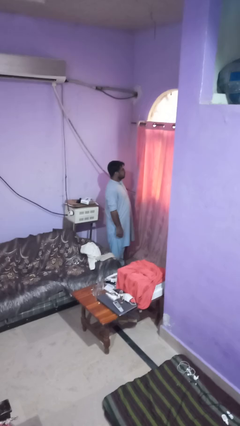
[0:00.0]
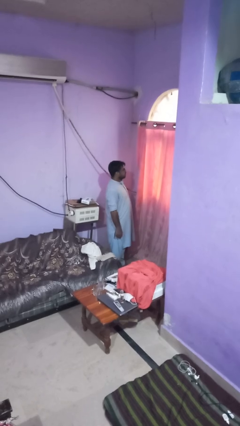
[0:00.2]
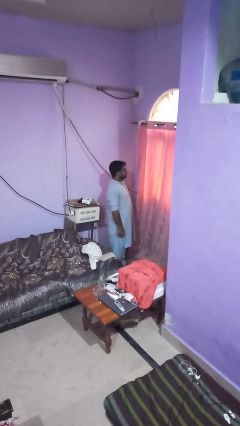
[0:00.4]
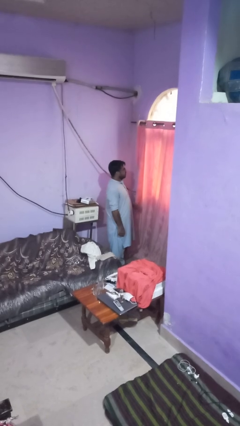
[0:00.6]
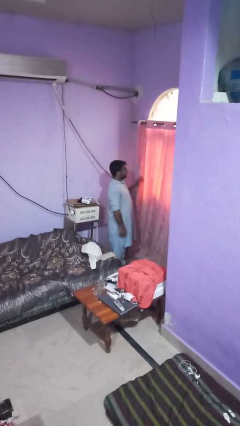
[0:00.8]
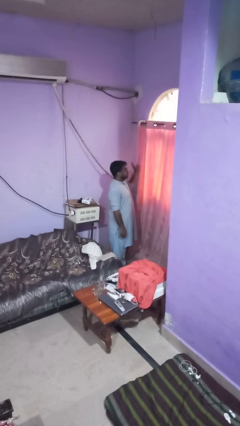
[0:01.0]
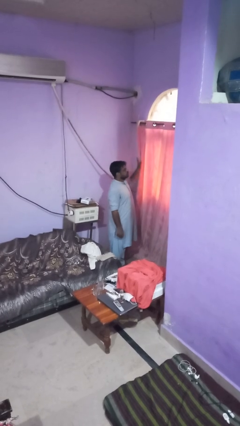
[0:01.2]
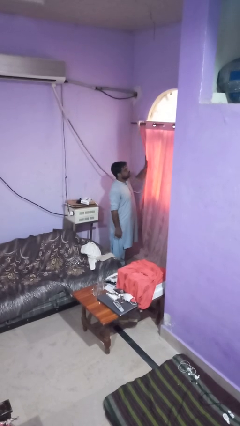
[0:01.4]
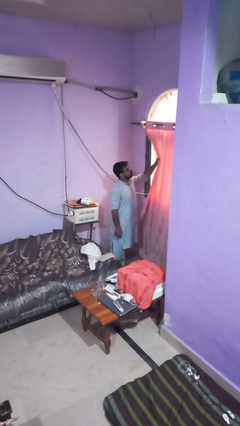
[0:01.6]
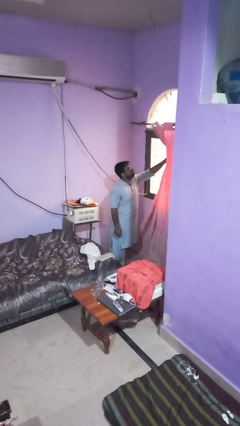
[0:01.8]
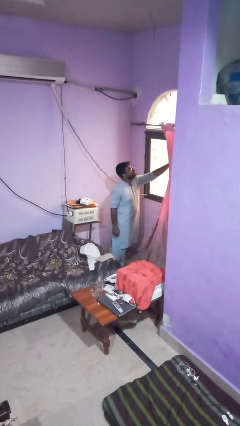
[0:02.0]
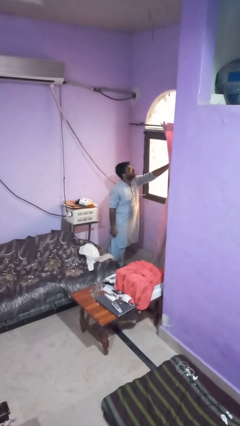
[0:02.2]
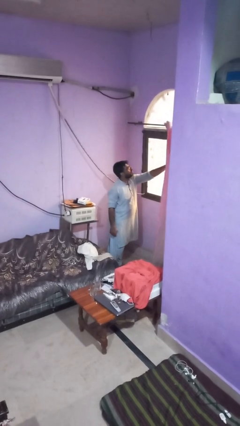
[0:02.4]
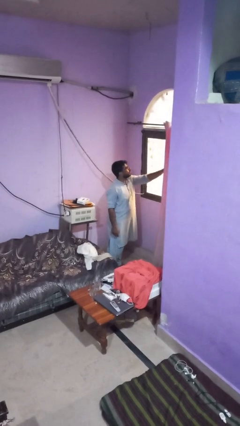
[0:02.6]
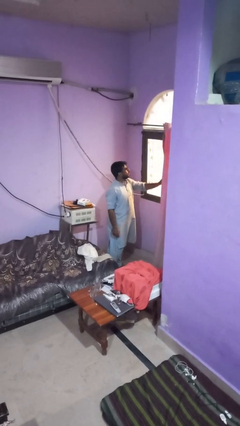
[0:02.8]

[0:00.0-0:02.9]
person opens curtains

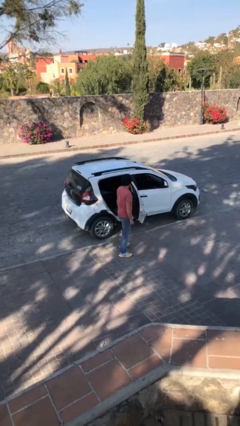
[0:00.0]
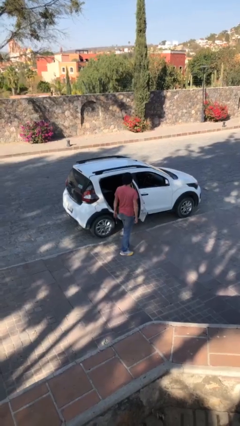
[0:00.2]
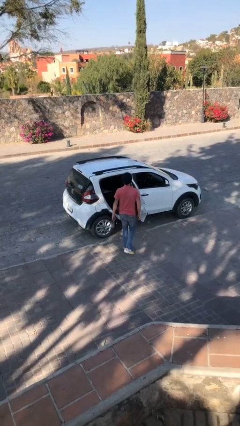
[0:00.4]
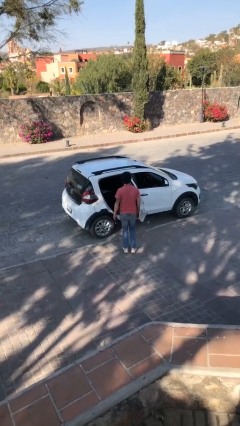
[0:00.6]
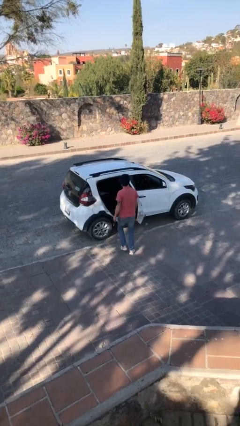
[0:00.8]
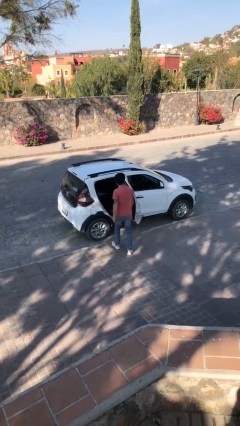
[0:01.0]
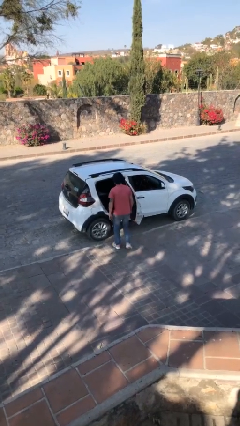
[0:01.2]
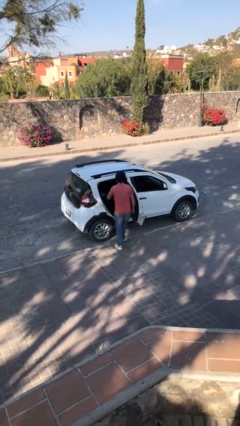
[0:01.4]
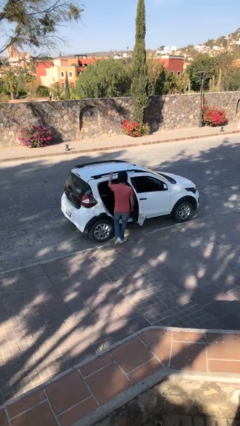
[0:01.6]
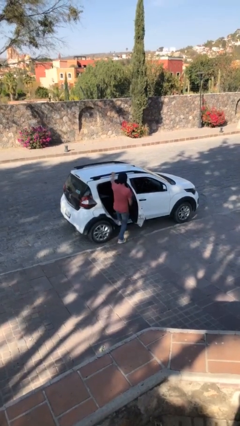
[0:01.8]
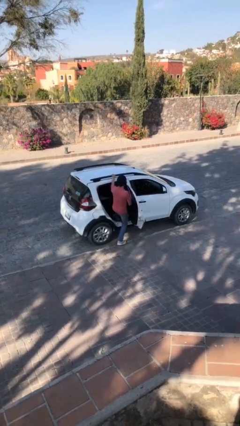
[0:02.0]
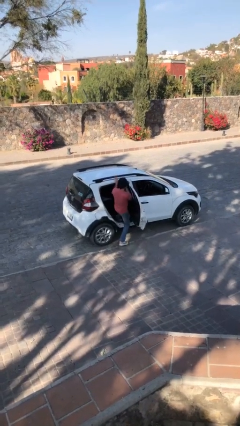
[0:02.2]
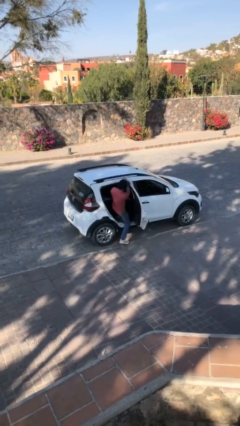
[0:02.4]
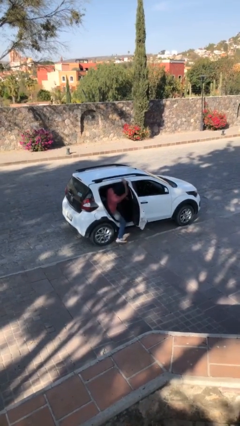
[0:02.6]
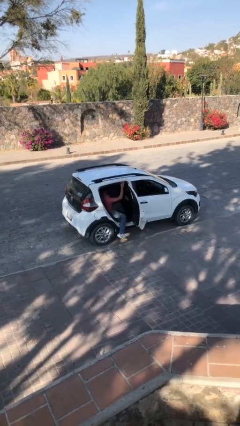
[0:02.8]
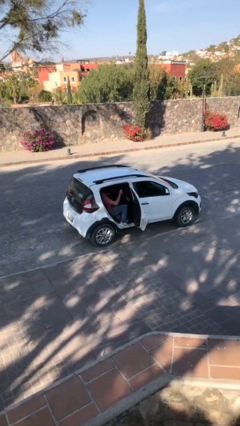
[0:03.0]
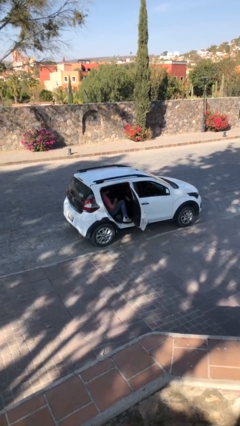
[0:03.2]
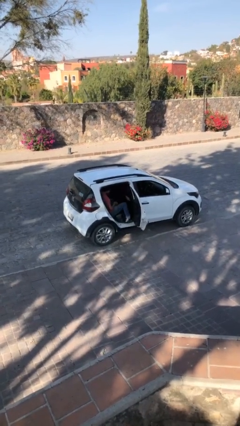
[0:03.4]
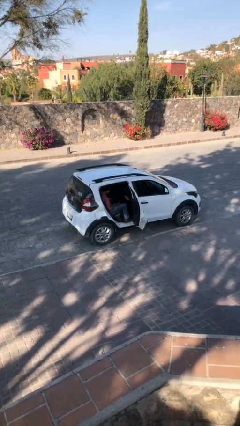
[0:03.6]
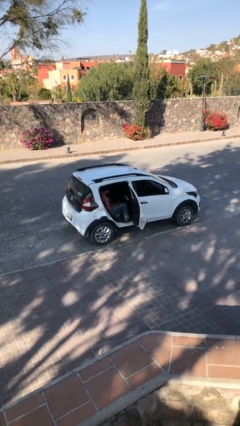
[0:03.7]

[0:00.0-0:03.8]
person enters car

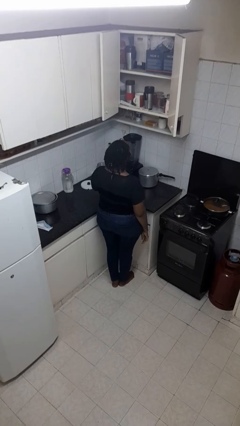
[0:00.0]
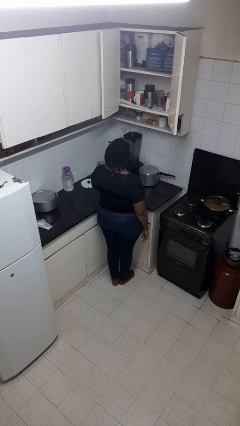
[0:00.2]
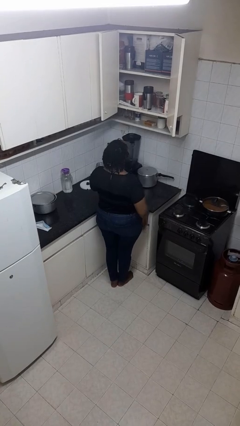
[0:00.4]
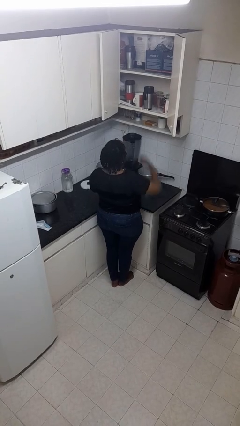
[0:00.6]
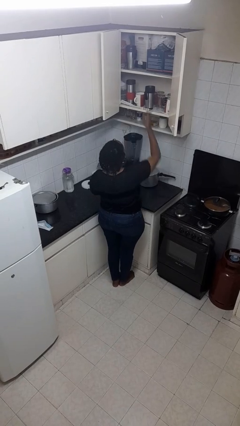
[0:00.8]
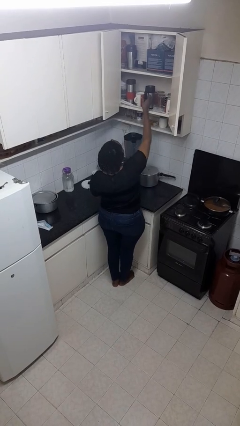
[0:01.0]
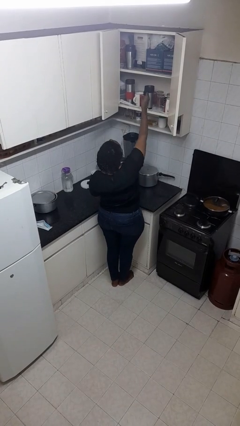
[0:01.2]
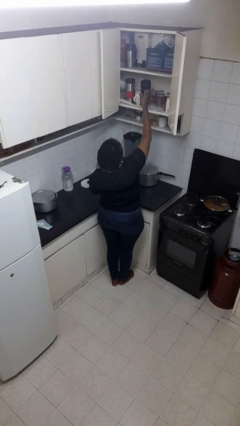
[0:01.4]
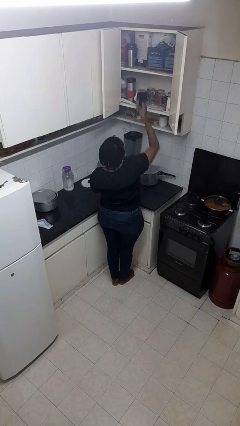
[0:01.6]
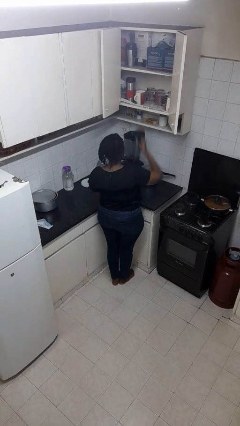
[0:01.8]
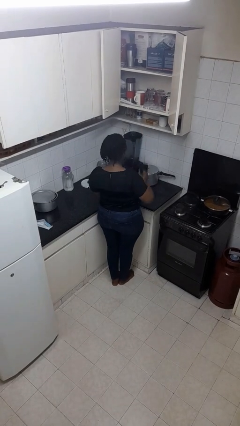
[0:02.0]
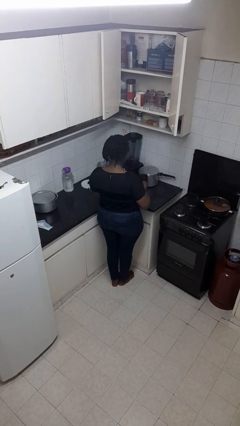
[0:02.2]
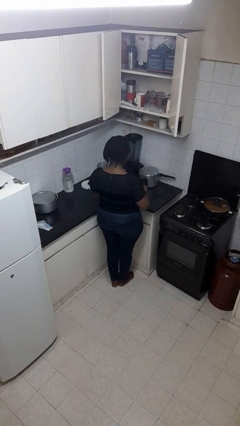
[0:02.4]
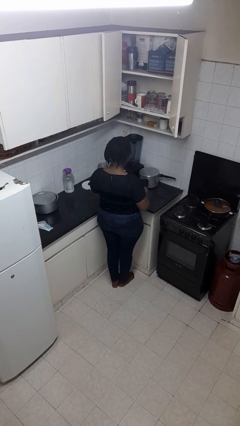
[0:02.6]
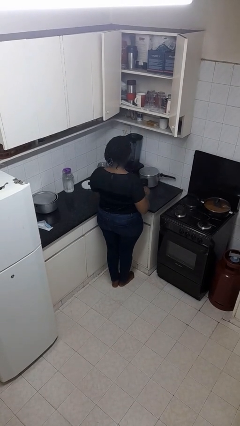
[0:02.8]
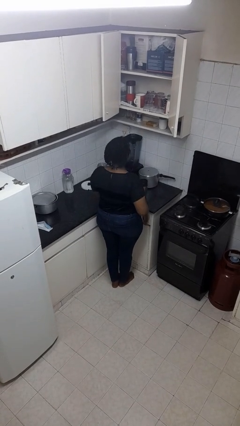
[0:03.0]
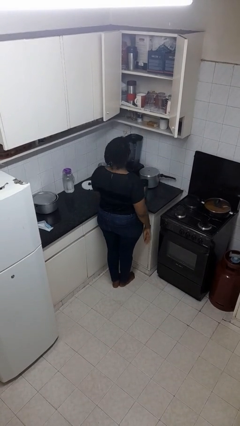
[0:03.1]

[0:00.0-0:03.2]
person takes object from cabinet

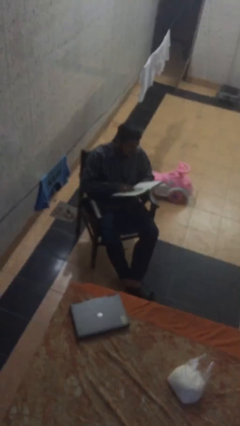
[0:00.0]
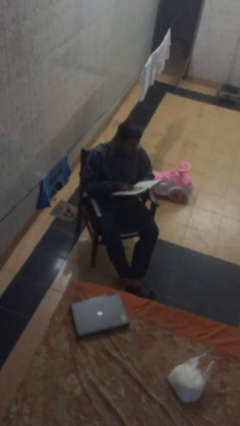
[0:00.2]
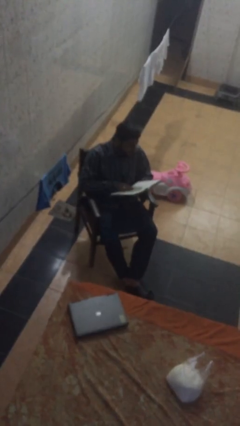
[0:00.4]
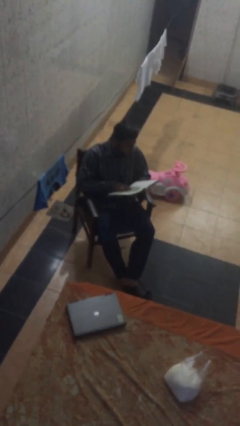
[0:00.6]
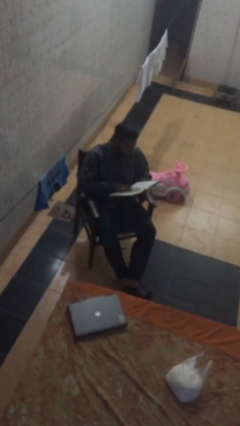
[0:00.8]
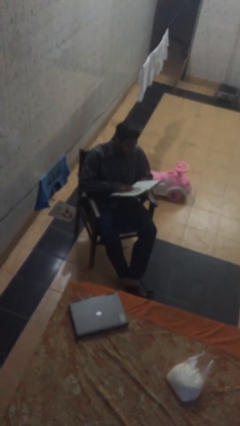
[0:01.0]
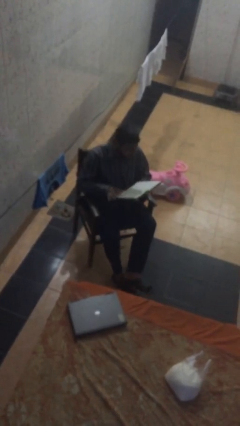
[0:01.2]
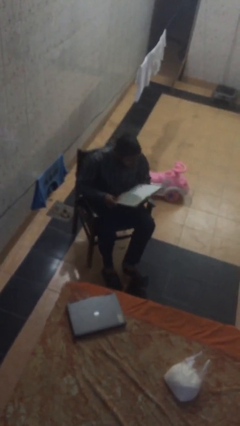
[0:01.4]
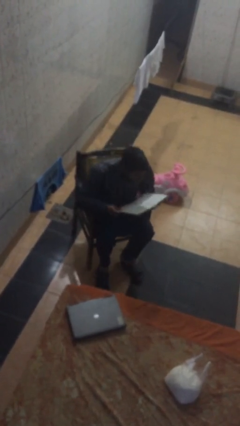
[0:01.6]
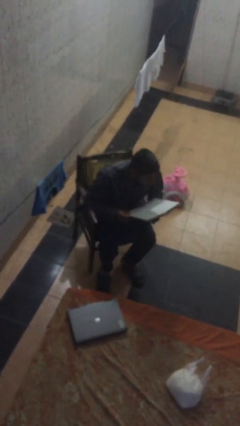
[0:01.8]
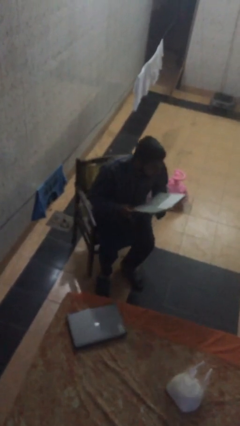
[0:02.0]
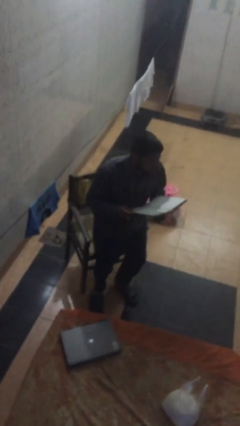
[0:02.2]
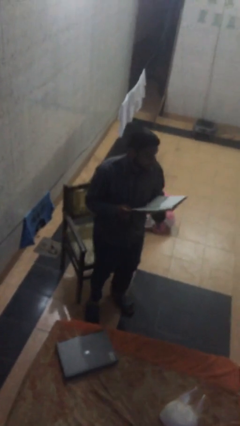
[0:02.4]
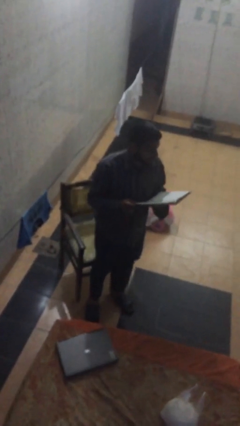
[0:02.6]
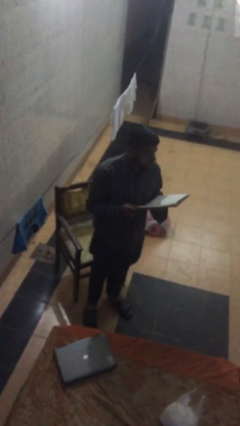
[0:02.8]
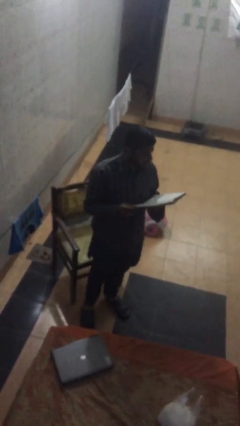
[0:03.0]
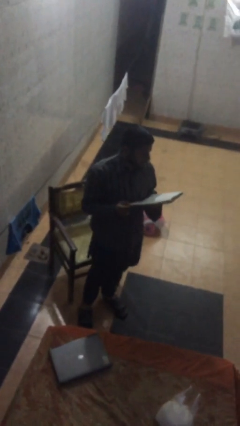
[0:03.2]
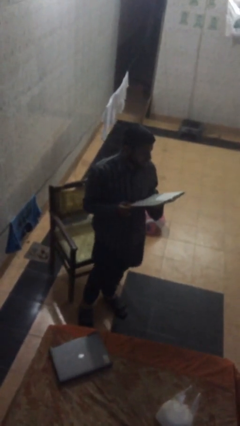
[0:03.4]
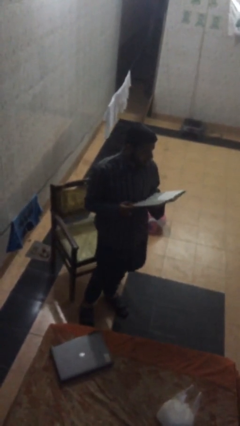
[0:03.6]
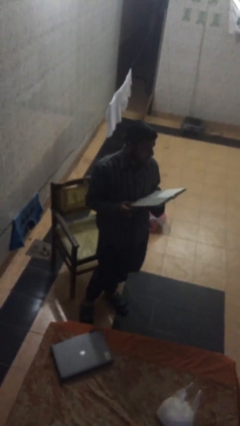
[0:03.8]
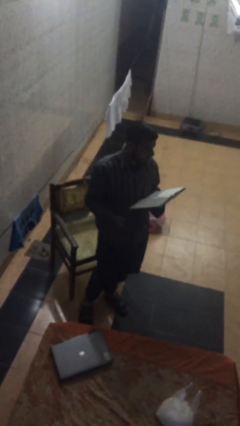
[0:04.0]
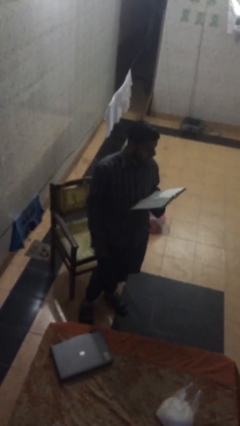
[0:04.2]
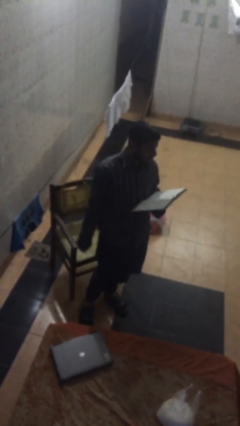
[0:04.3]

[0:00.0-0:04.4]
person stands up

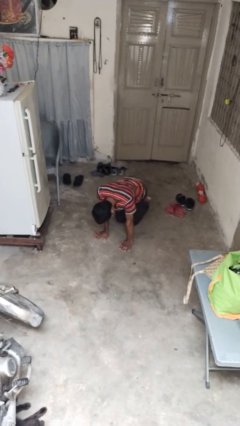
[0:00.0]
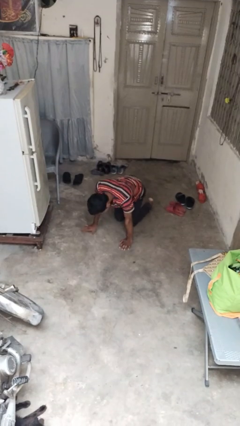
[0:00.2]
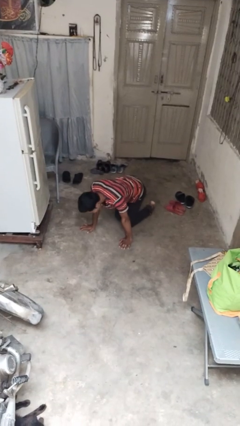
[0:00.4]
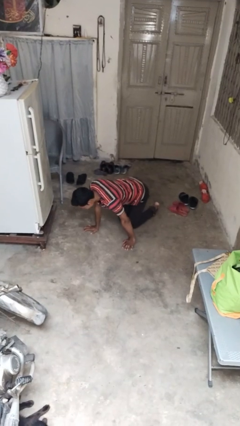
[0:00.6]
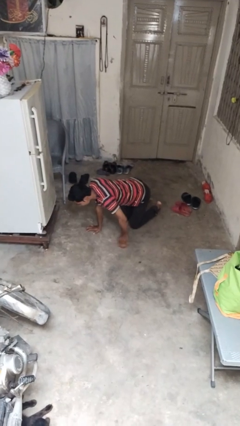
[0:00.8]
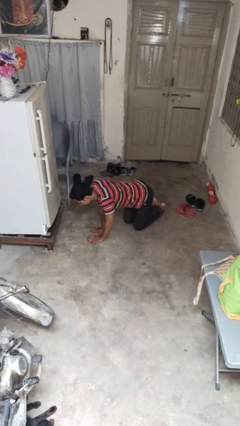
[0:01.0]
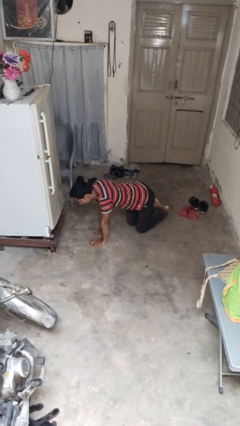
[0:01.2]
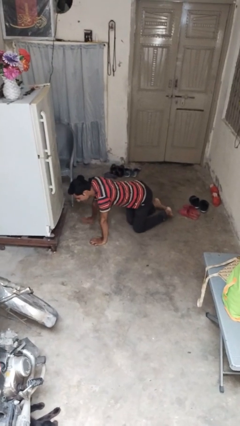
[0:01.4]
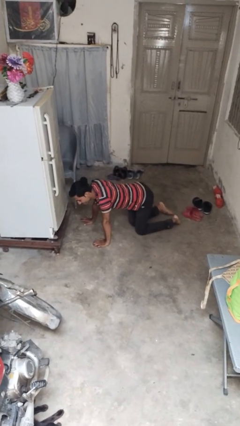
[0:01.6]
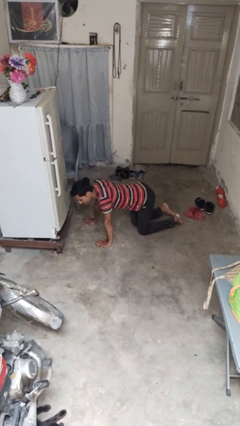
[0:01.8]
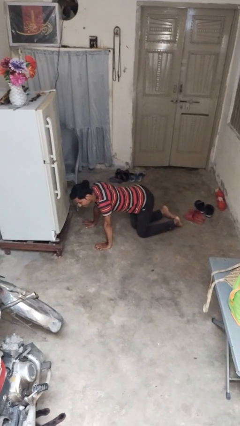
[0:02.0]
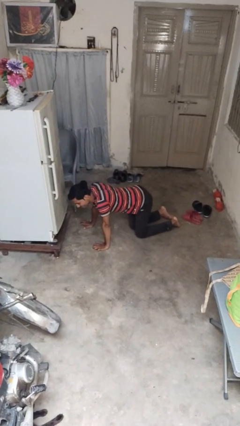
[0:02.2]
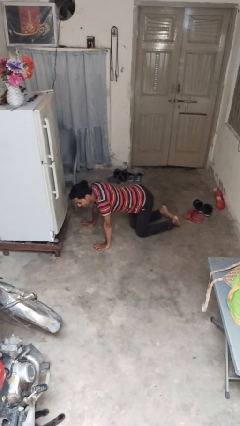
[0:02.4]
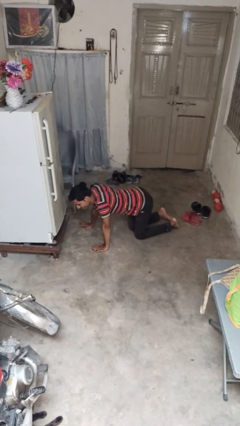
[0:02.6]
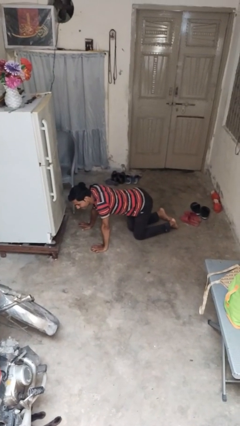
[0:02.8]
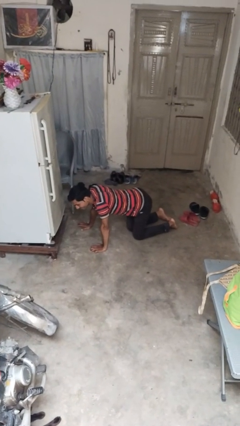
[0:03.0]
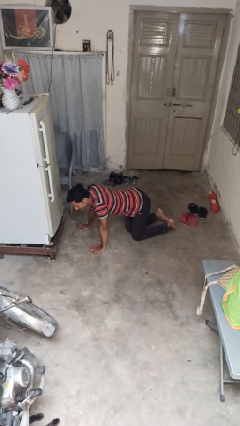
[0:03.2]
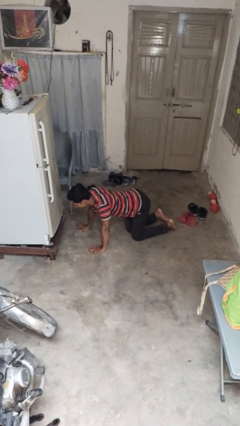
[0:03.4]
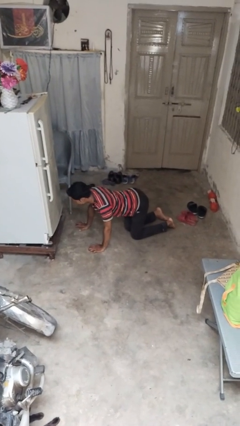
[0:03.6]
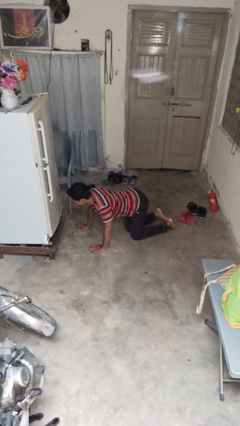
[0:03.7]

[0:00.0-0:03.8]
person crawls
